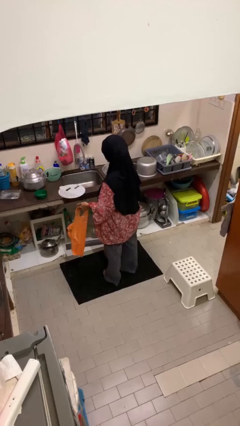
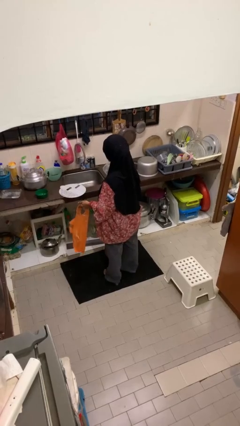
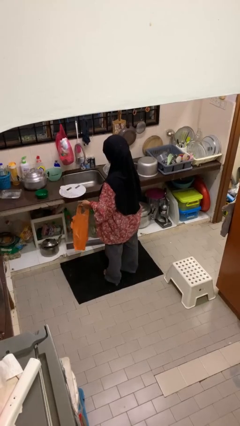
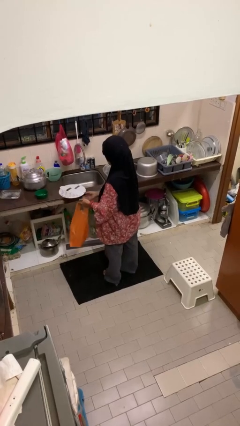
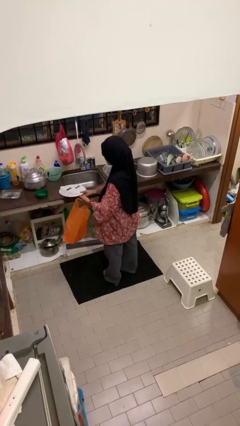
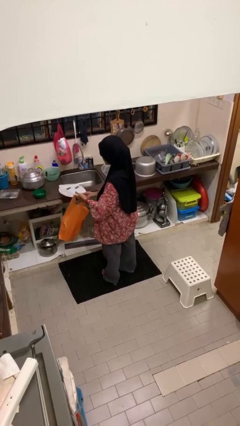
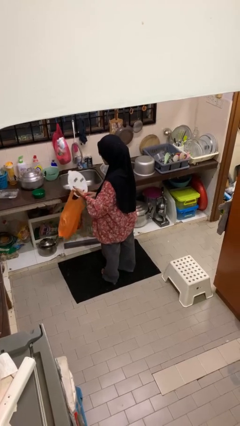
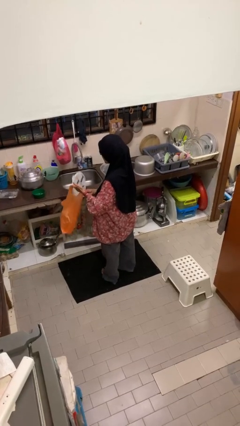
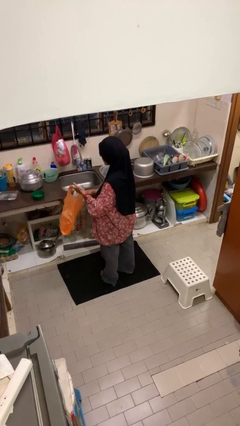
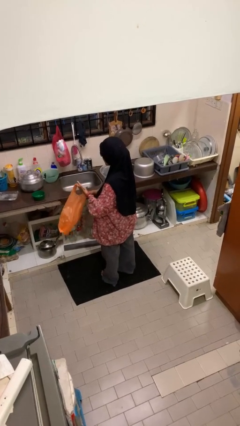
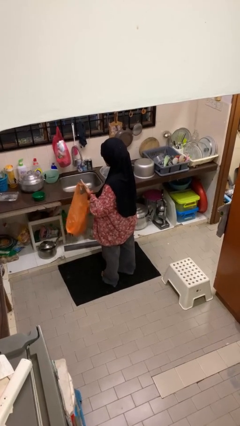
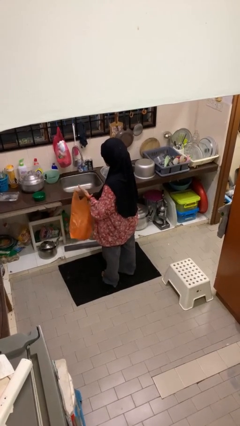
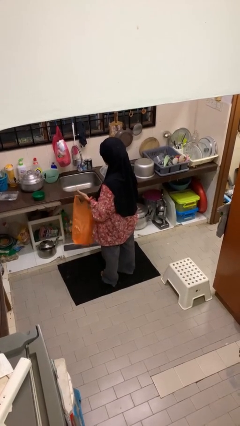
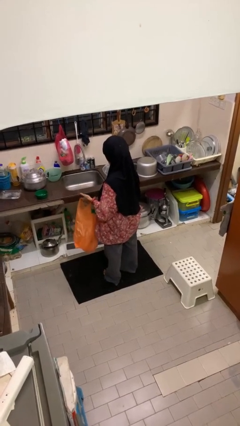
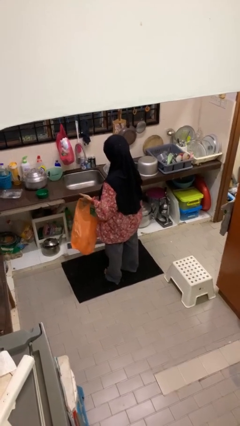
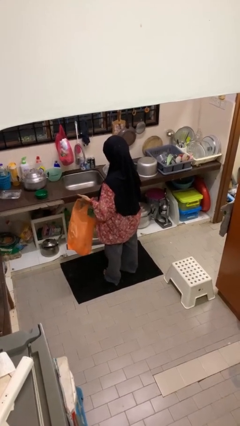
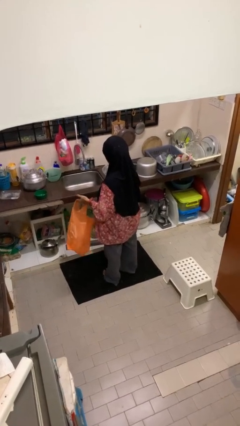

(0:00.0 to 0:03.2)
person puts object into bag

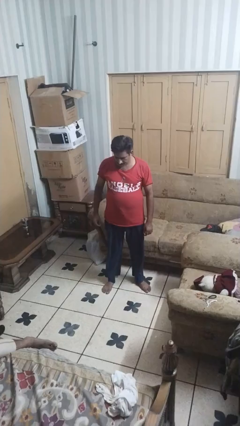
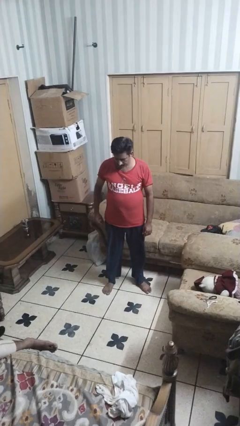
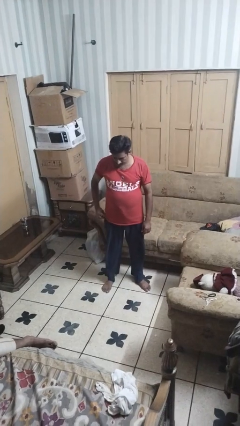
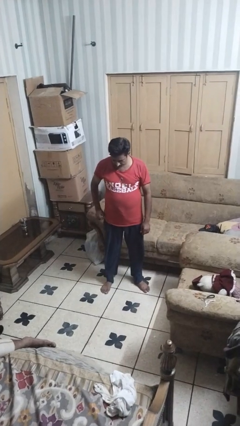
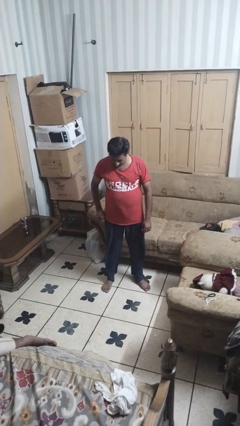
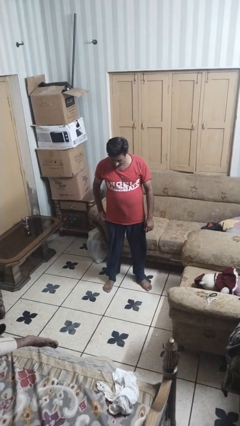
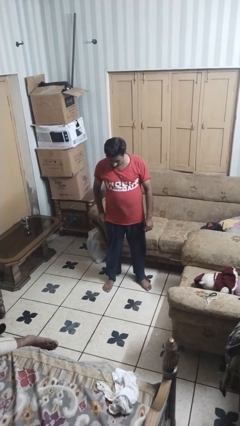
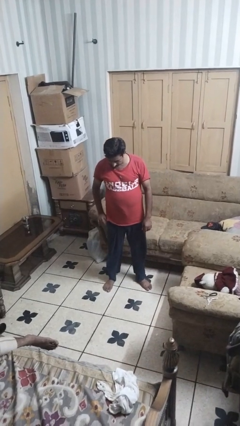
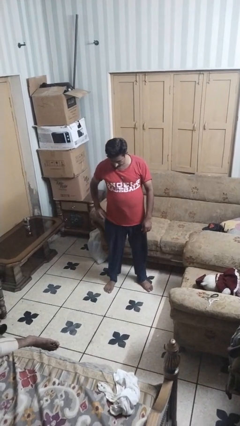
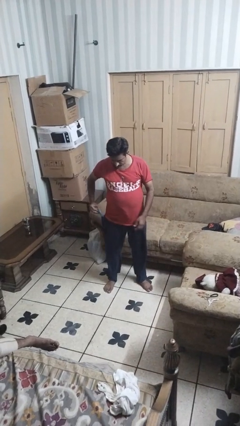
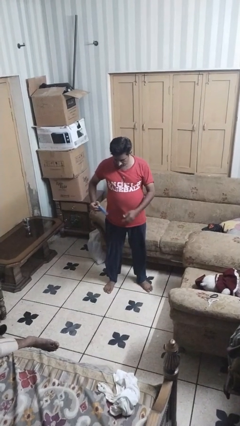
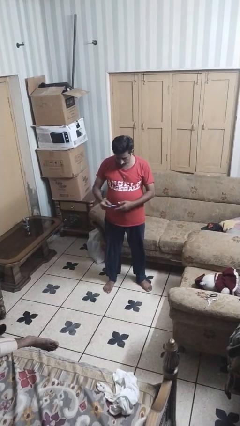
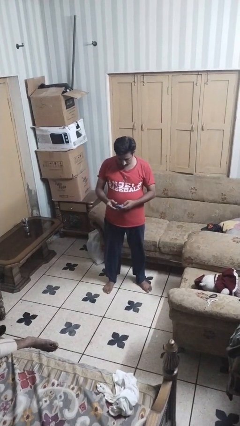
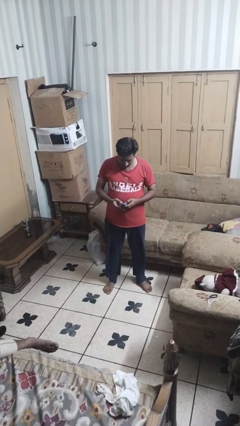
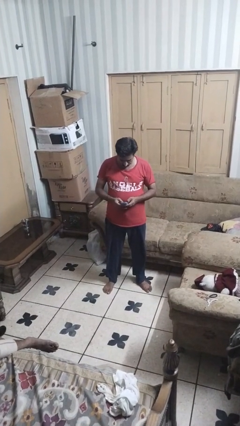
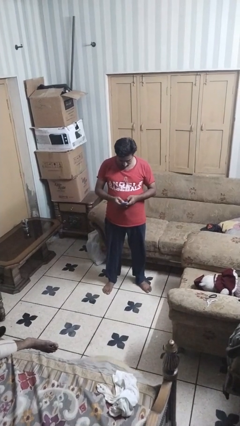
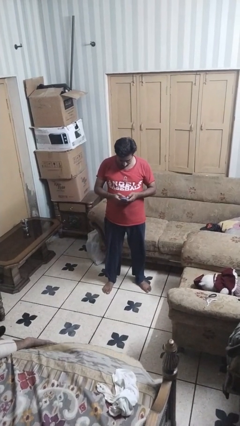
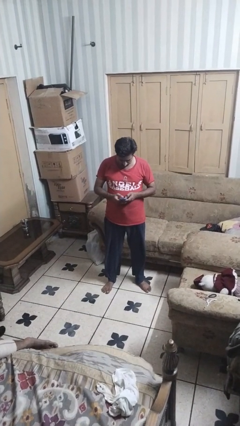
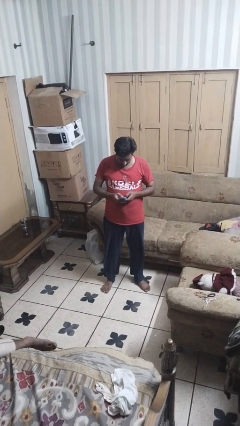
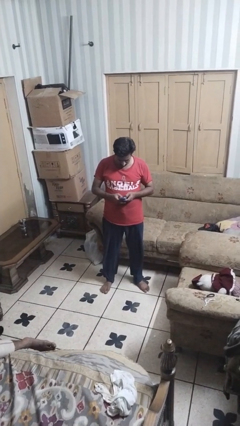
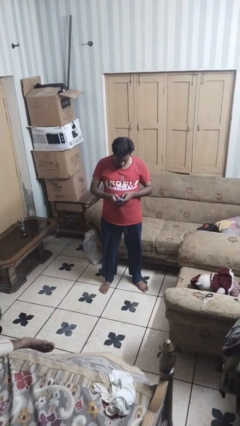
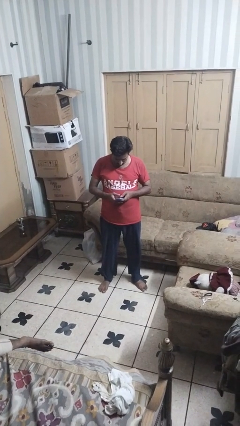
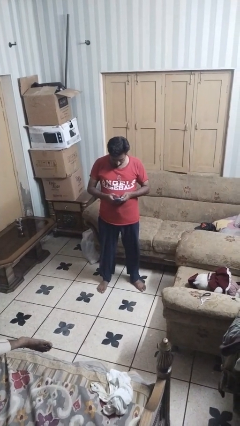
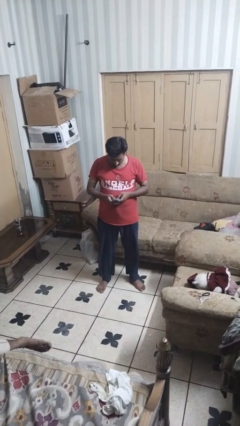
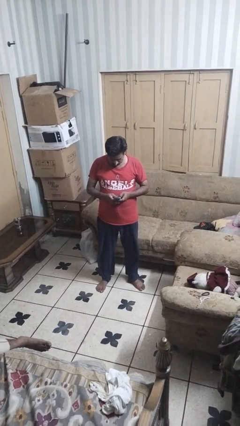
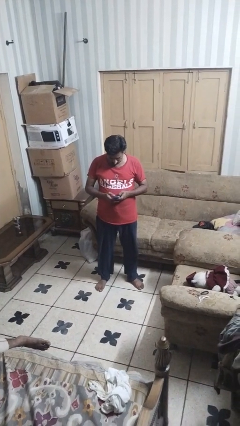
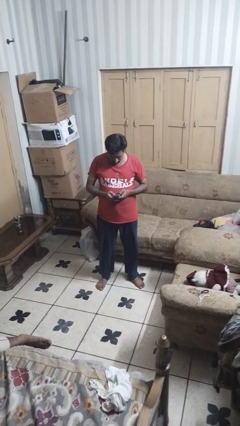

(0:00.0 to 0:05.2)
person takes phone from pocket

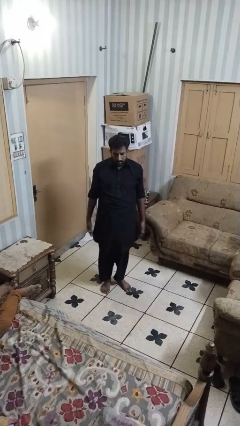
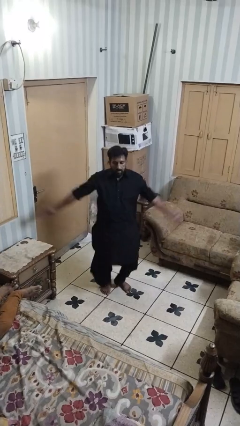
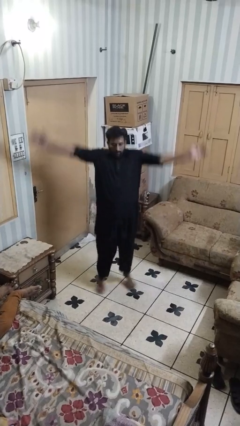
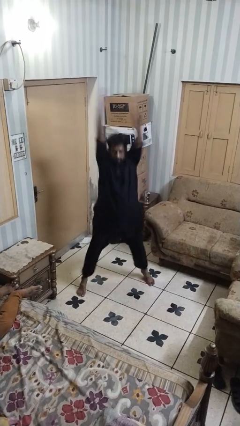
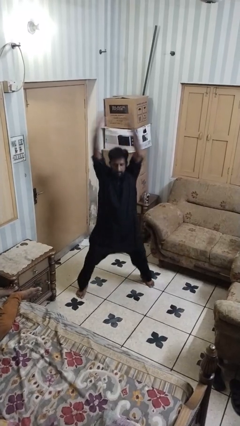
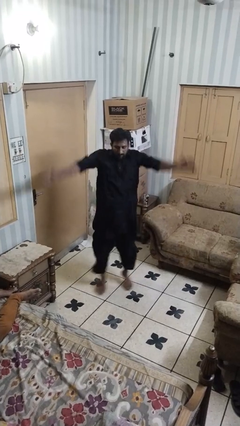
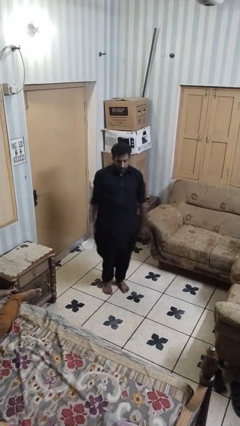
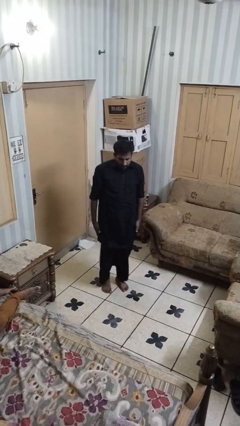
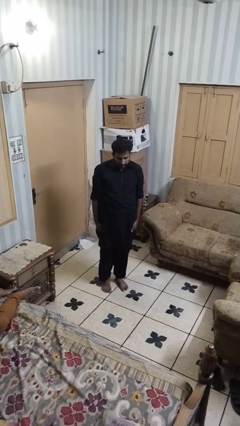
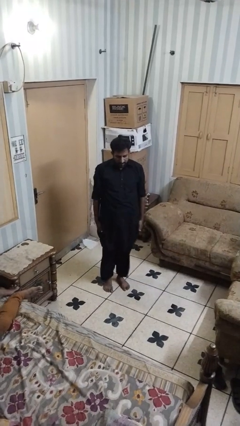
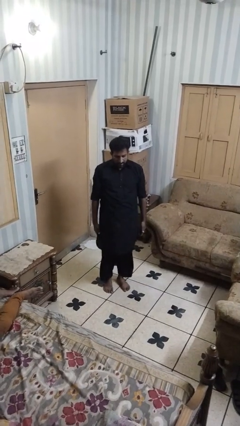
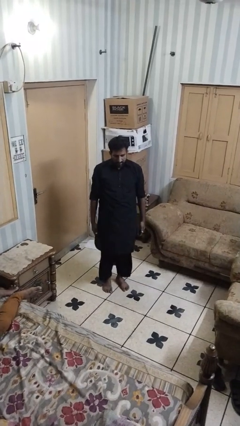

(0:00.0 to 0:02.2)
person exercises with jumping jacks

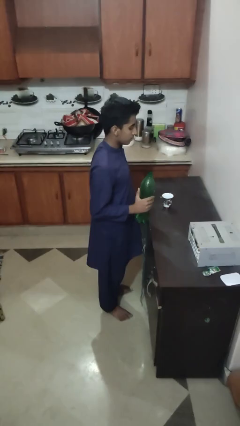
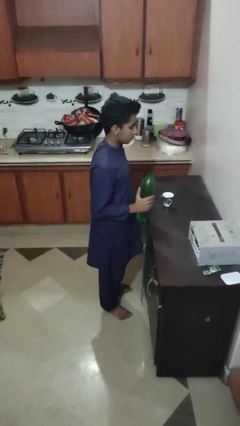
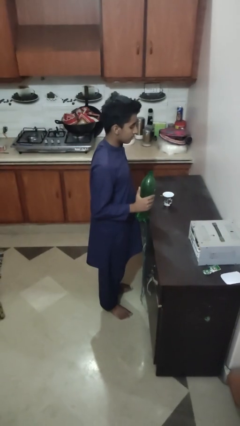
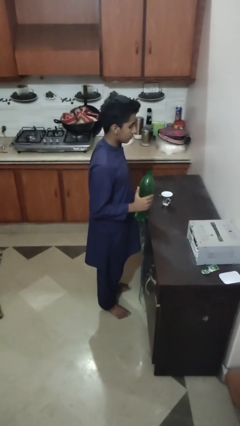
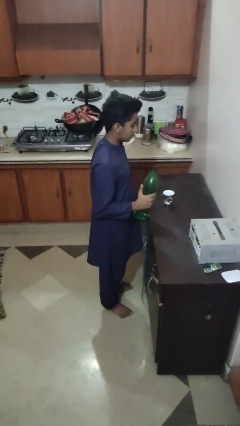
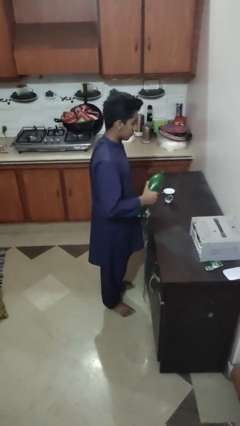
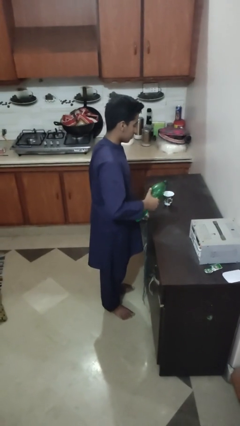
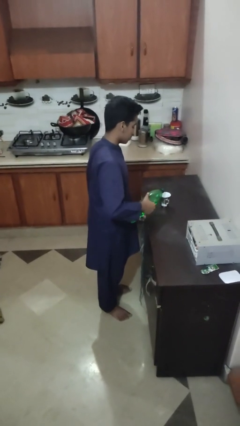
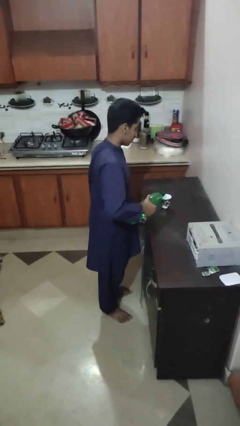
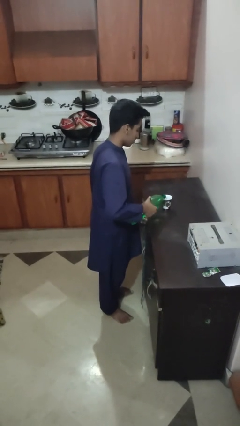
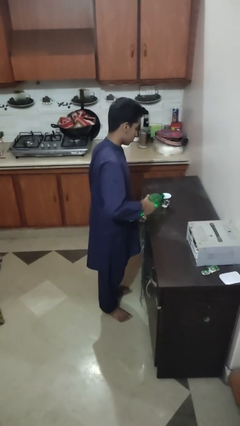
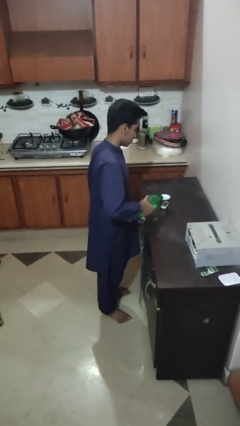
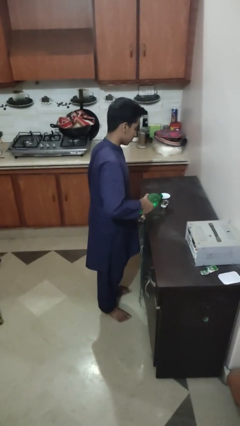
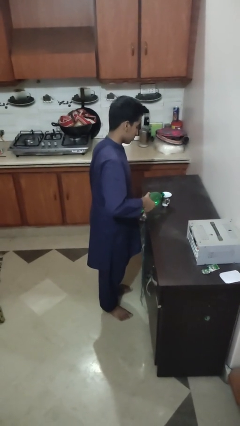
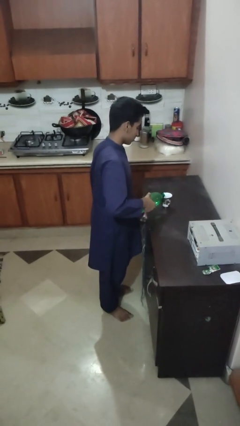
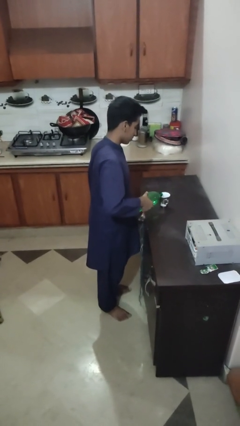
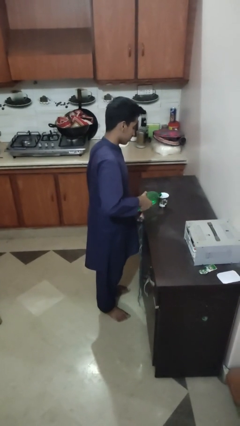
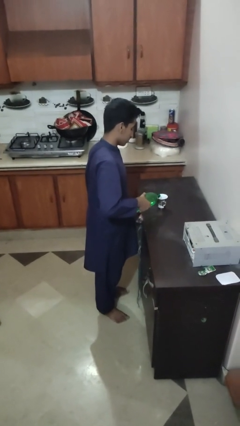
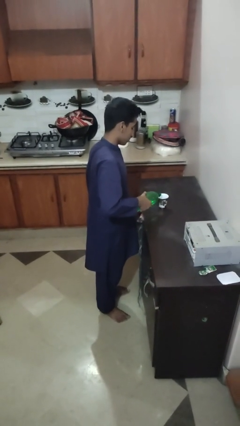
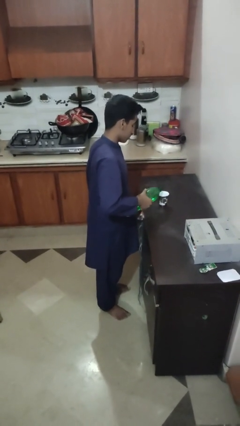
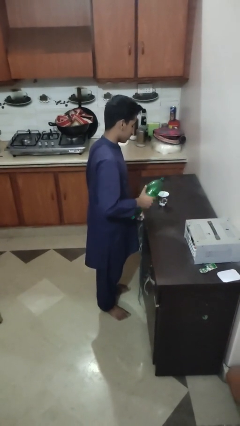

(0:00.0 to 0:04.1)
person pours liquid into cup

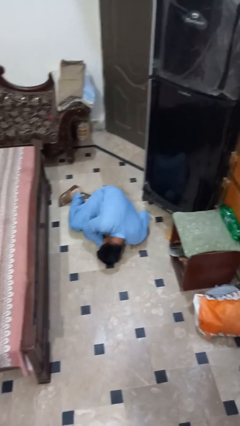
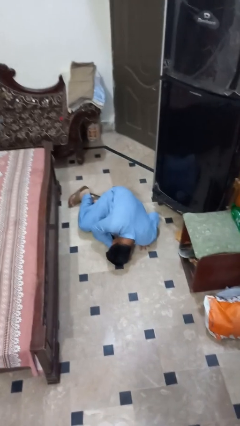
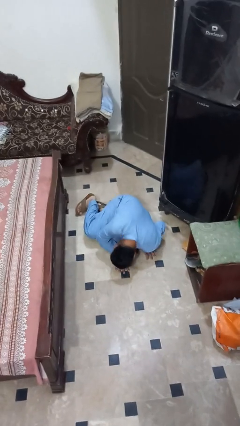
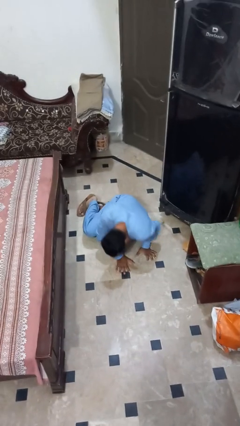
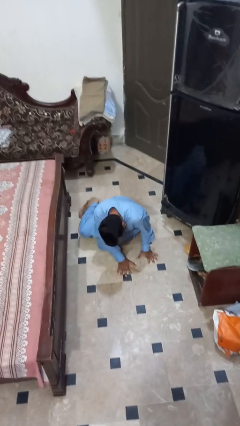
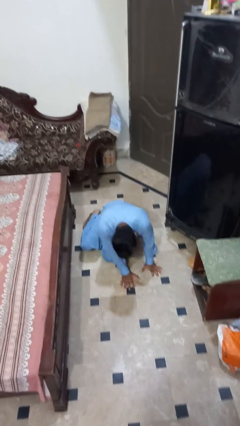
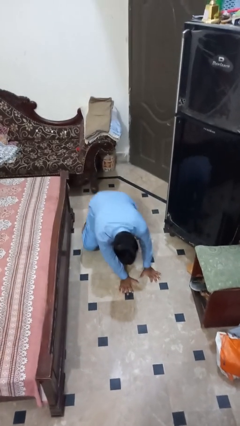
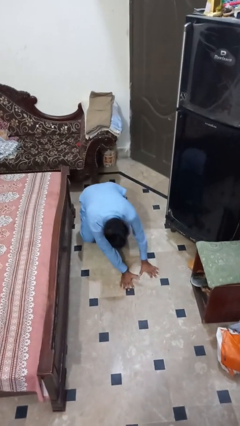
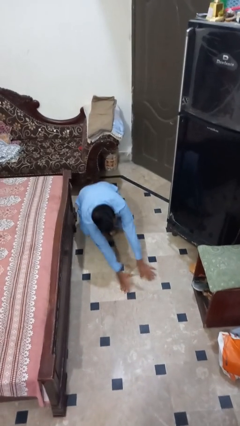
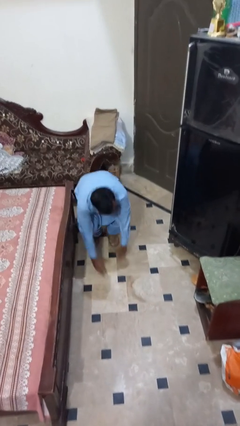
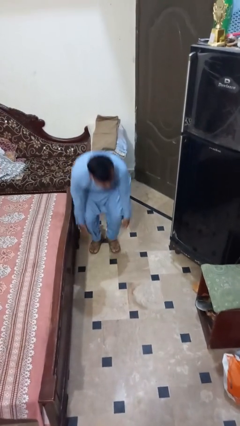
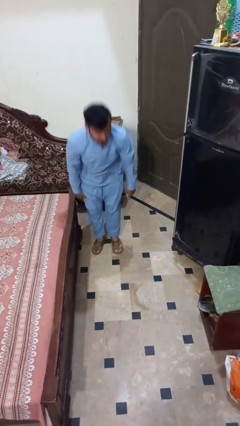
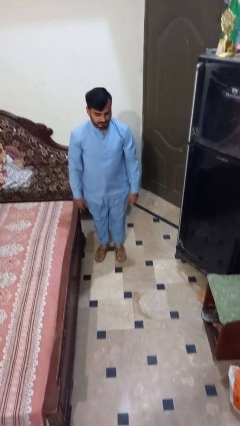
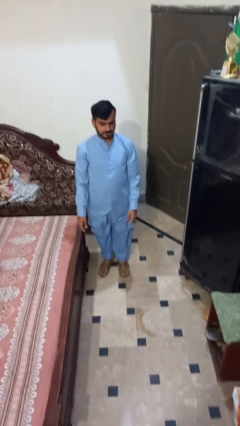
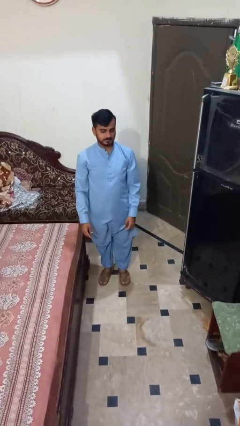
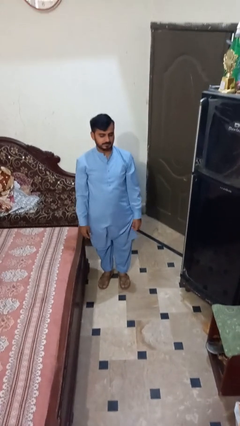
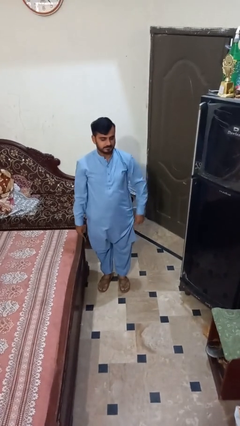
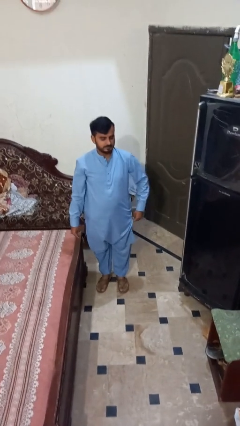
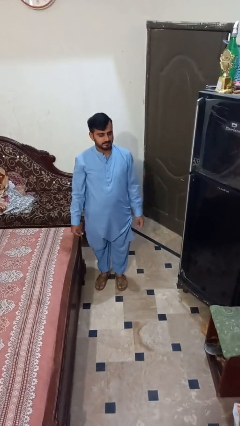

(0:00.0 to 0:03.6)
person stands up from floor
